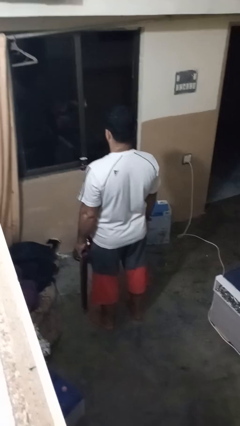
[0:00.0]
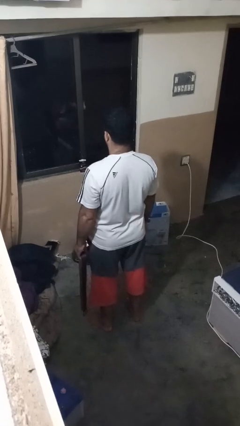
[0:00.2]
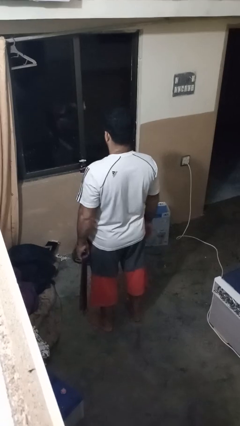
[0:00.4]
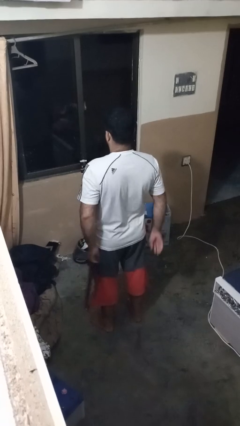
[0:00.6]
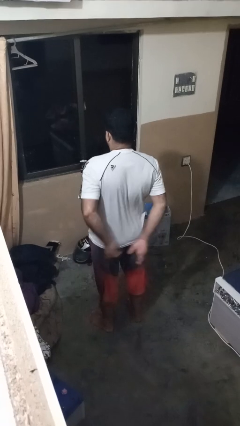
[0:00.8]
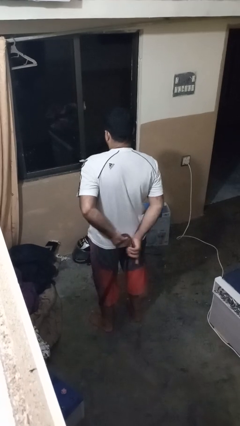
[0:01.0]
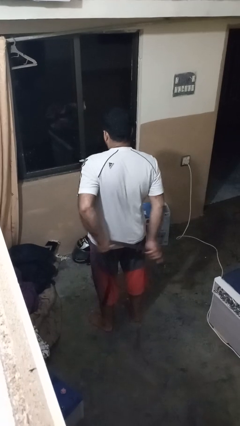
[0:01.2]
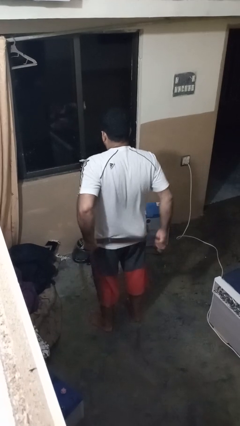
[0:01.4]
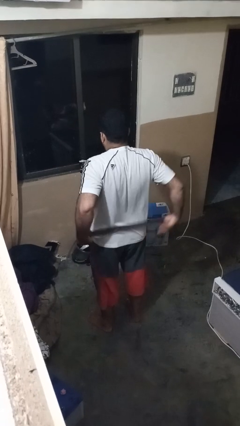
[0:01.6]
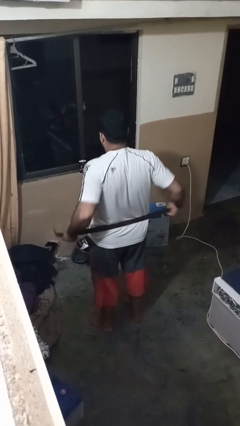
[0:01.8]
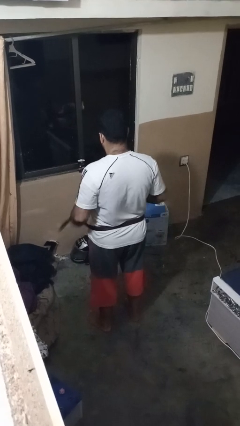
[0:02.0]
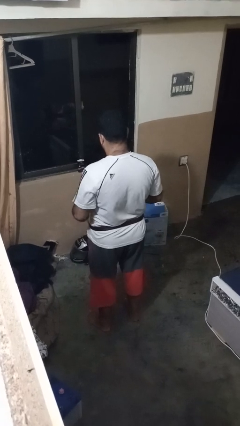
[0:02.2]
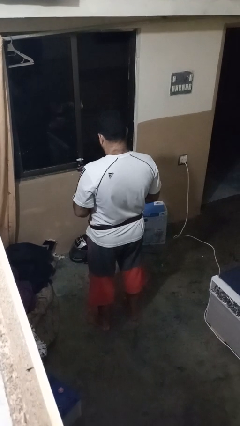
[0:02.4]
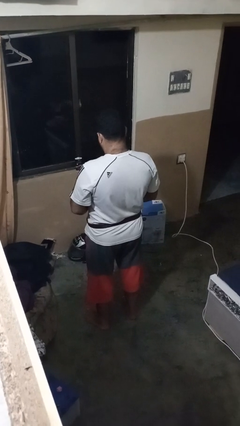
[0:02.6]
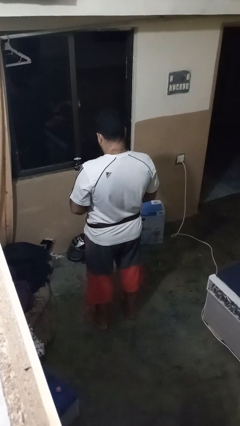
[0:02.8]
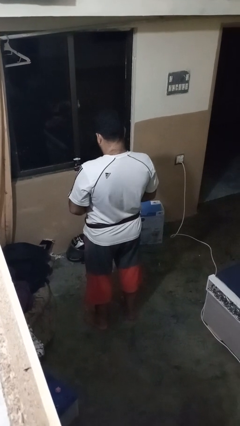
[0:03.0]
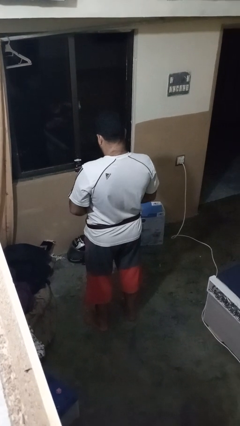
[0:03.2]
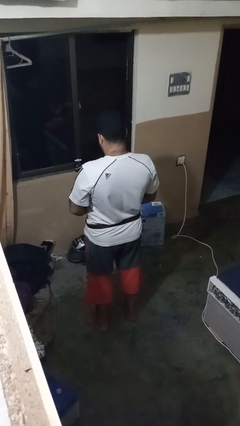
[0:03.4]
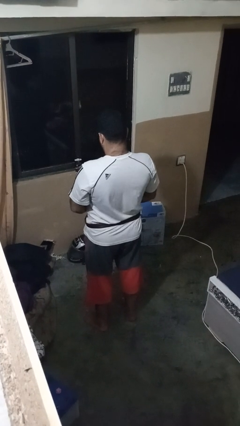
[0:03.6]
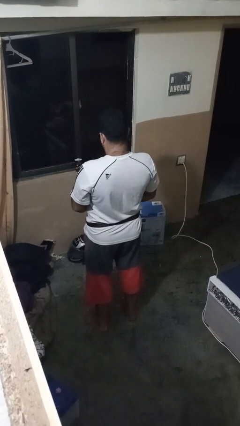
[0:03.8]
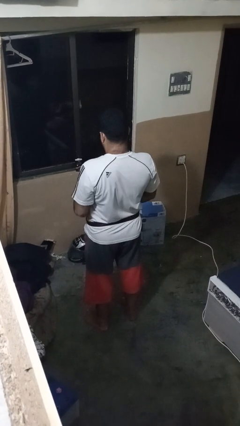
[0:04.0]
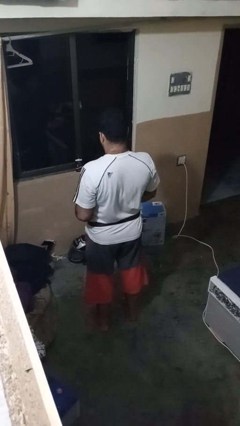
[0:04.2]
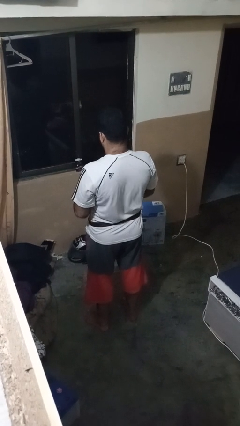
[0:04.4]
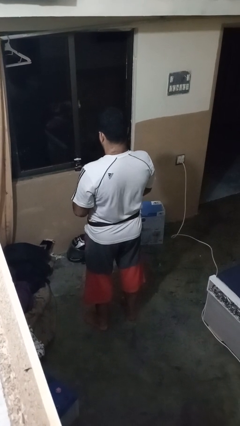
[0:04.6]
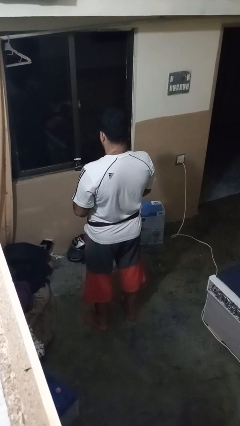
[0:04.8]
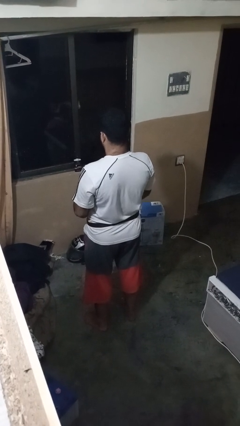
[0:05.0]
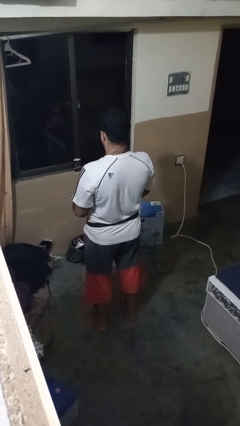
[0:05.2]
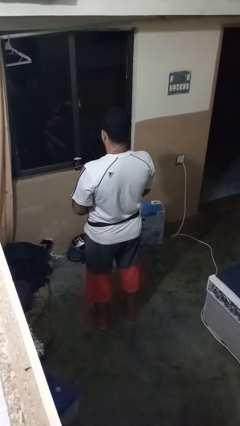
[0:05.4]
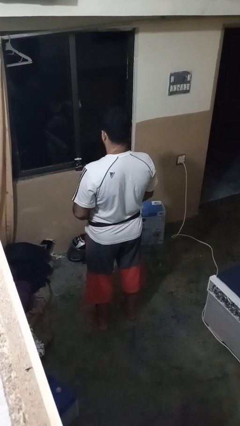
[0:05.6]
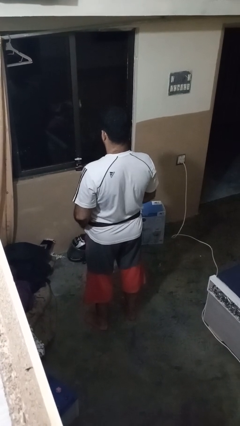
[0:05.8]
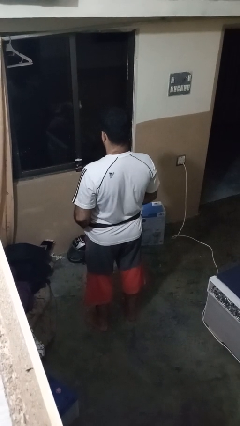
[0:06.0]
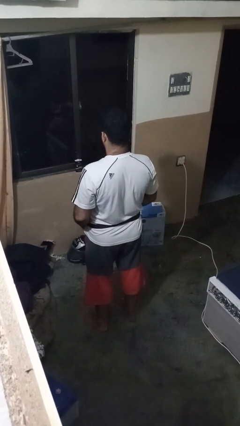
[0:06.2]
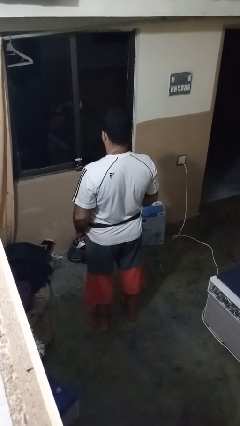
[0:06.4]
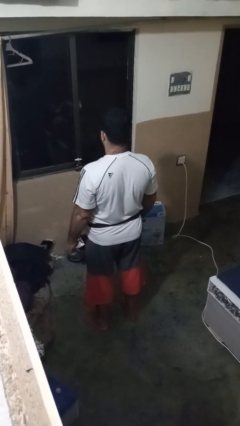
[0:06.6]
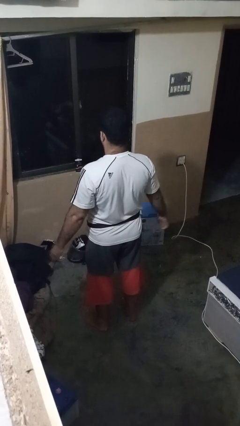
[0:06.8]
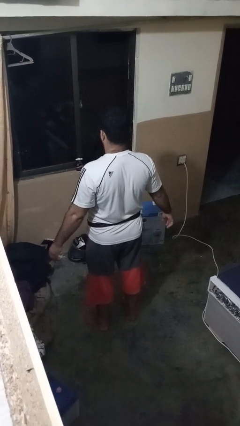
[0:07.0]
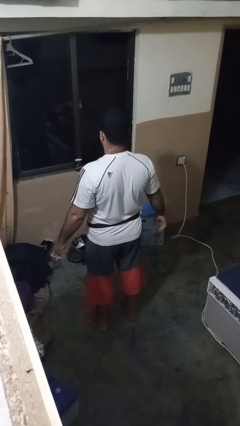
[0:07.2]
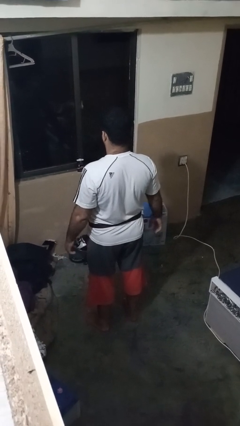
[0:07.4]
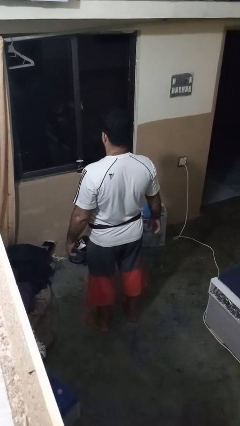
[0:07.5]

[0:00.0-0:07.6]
person puts on belt

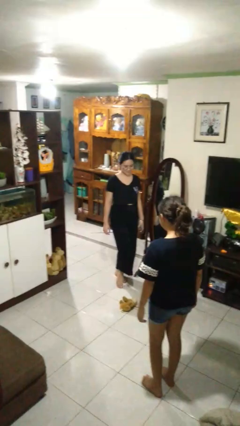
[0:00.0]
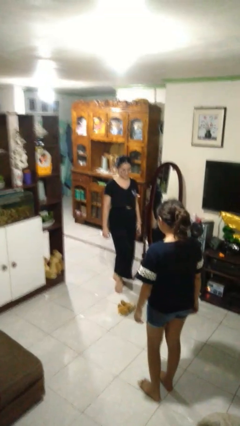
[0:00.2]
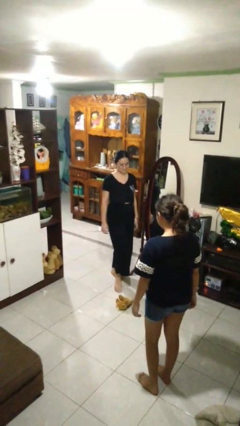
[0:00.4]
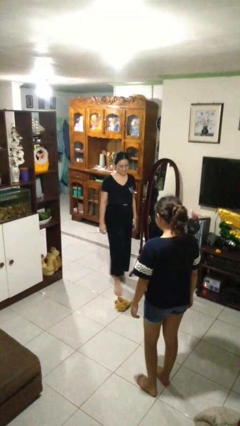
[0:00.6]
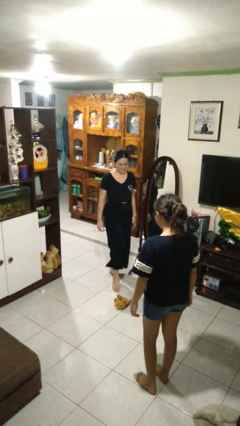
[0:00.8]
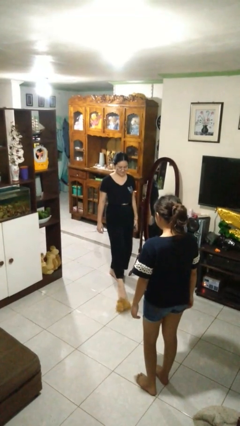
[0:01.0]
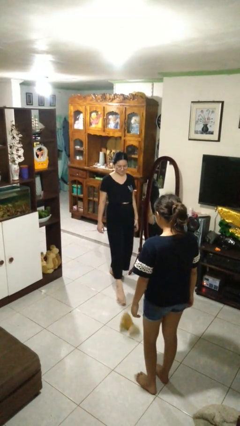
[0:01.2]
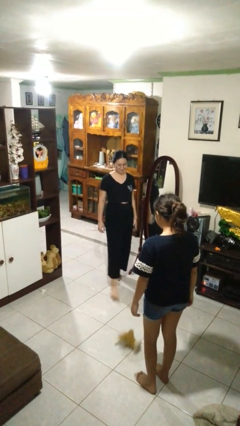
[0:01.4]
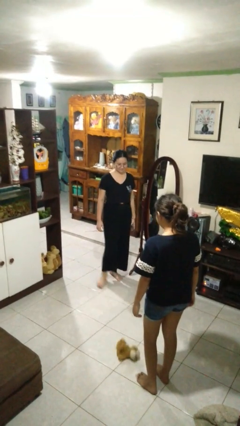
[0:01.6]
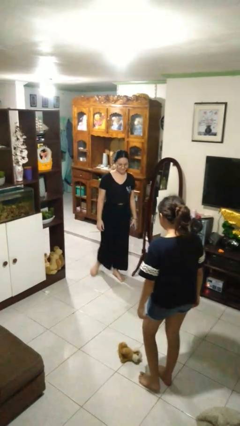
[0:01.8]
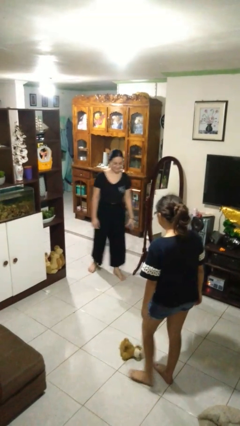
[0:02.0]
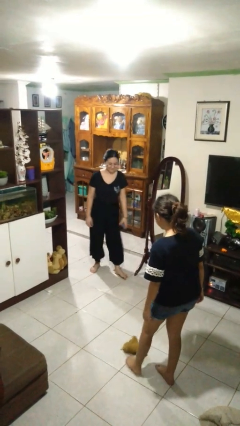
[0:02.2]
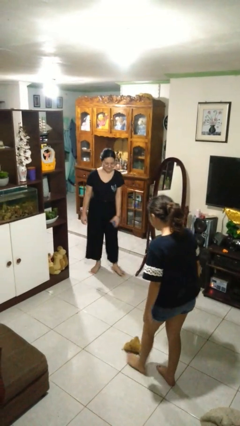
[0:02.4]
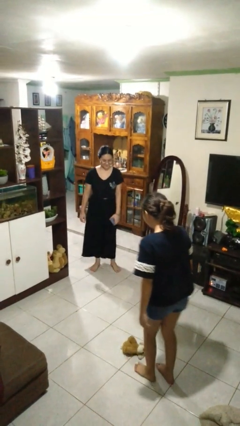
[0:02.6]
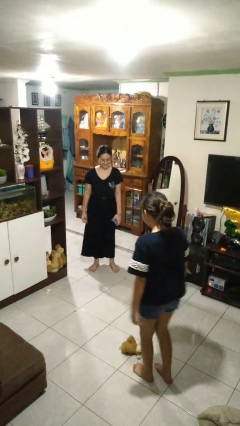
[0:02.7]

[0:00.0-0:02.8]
person kicks object to person

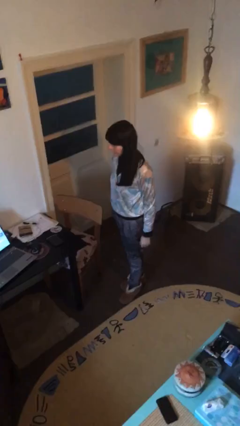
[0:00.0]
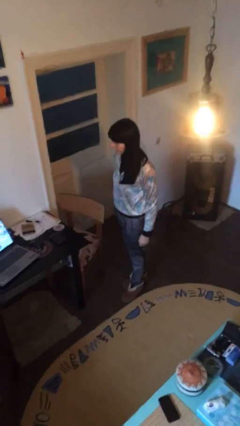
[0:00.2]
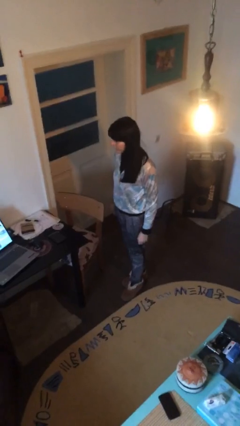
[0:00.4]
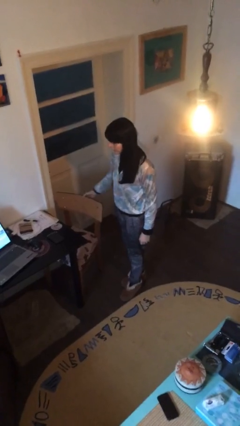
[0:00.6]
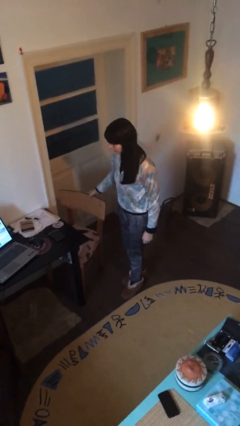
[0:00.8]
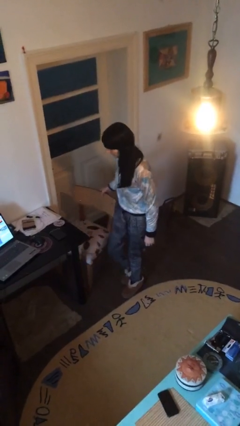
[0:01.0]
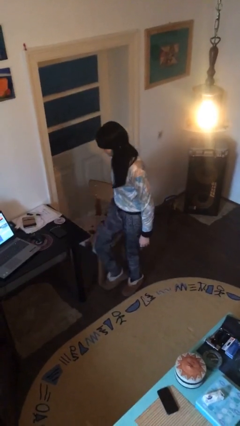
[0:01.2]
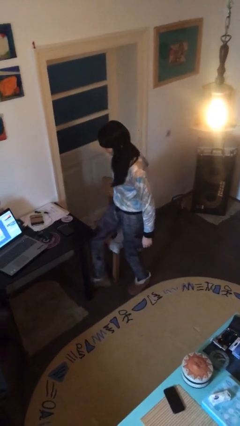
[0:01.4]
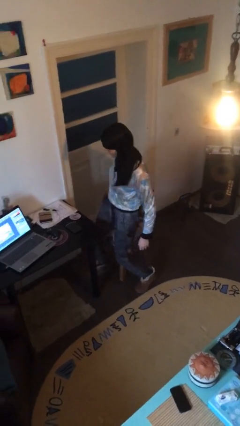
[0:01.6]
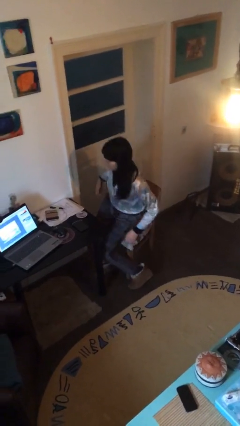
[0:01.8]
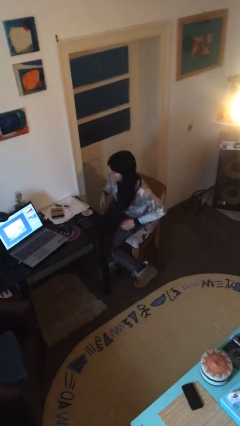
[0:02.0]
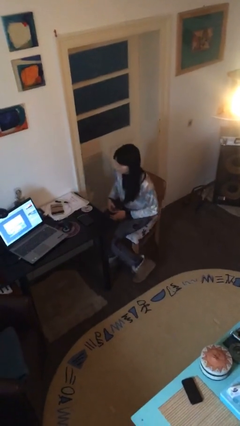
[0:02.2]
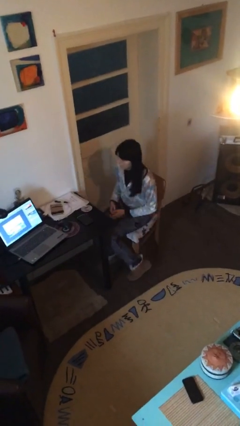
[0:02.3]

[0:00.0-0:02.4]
person sits down

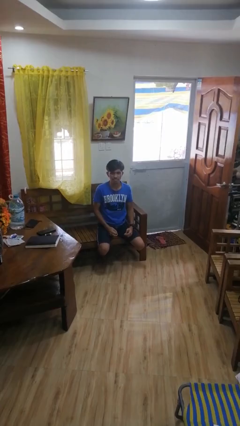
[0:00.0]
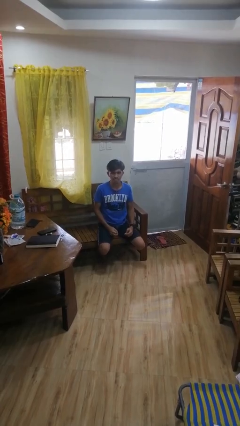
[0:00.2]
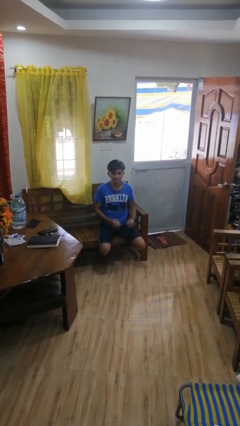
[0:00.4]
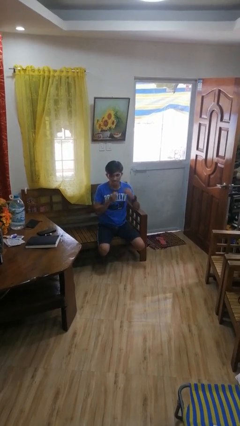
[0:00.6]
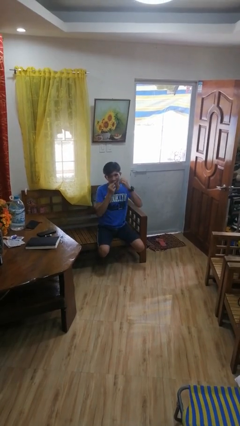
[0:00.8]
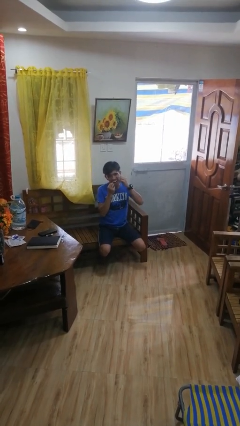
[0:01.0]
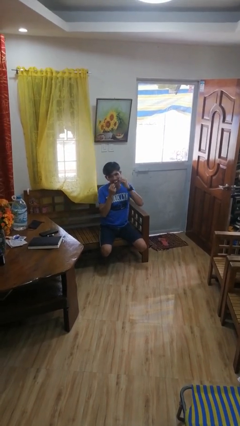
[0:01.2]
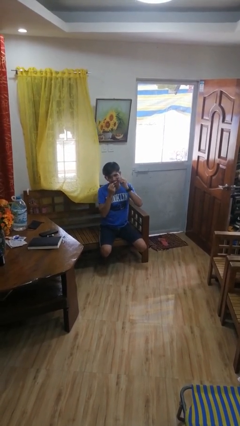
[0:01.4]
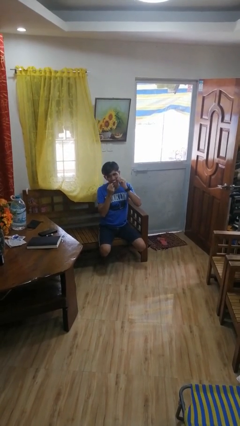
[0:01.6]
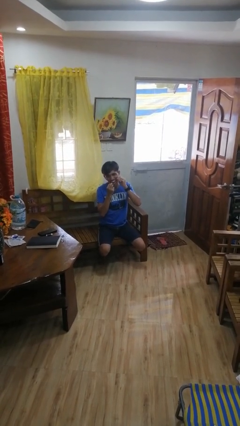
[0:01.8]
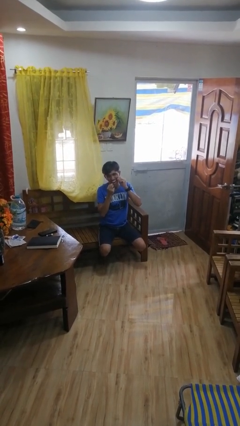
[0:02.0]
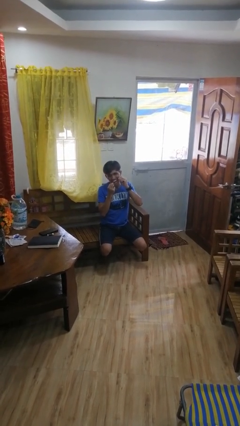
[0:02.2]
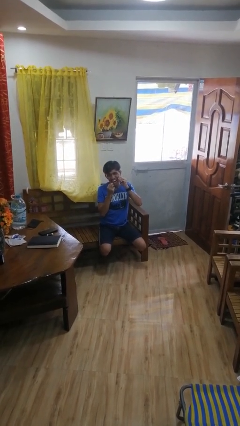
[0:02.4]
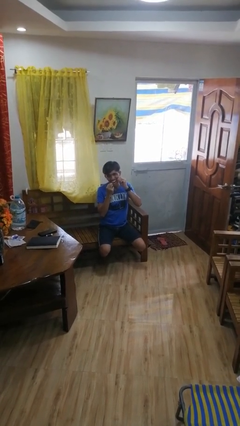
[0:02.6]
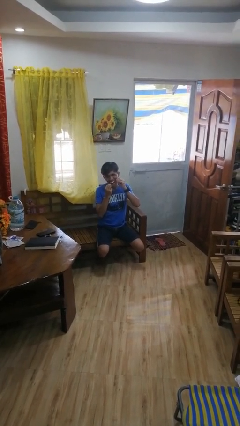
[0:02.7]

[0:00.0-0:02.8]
person flosses

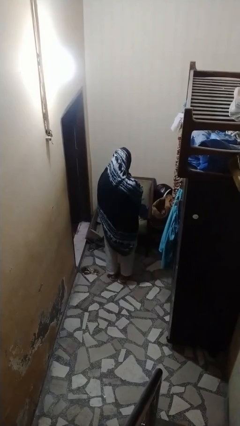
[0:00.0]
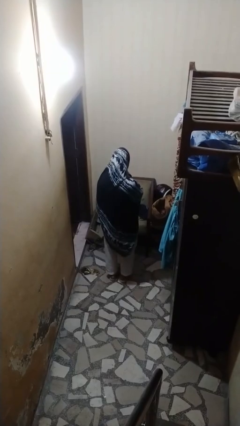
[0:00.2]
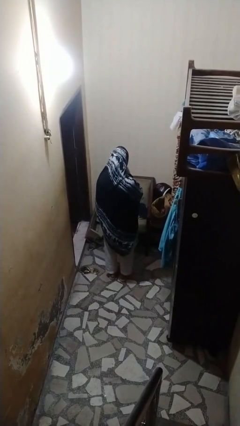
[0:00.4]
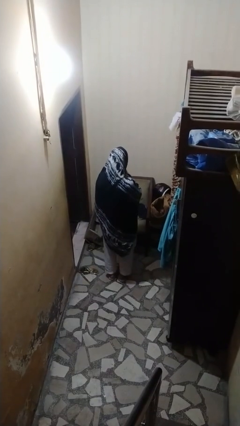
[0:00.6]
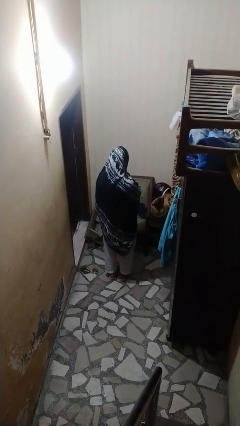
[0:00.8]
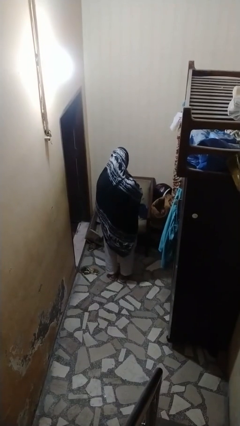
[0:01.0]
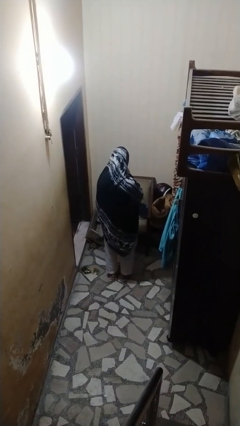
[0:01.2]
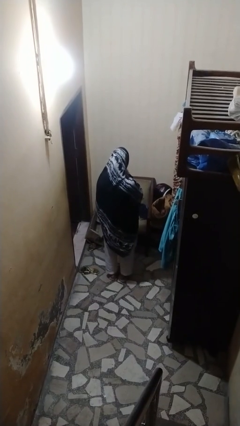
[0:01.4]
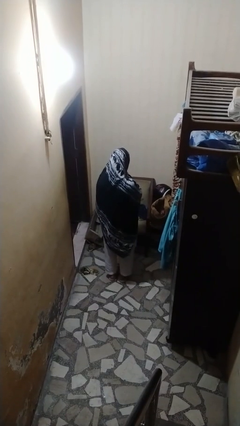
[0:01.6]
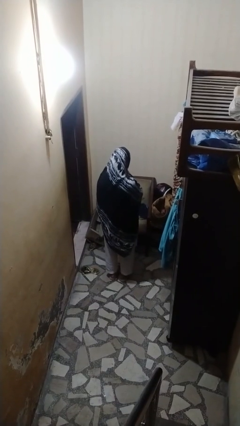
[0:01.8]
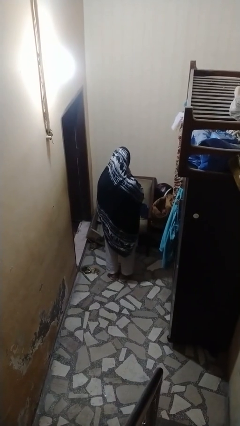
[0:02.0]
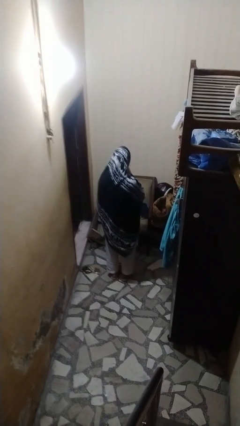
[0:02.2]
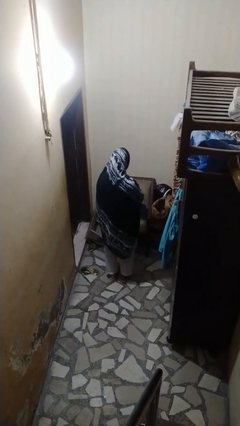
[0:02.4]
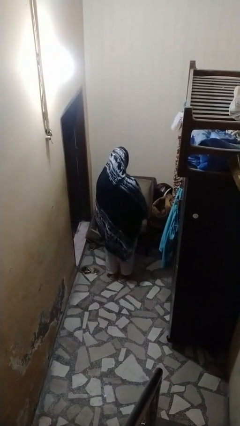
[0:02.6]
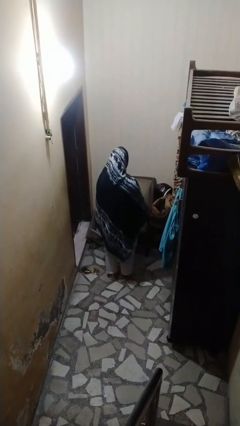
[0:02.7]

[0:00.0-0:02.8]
person strokes chin
